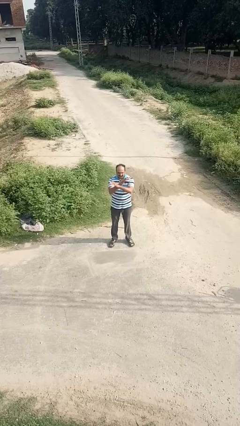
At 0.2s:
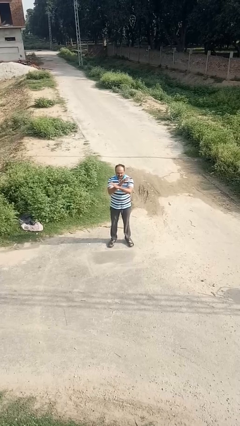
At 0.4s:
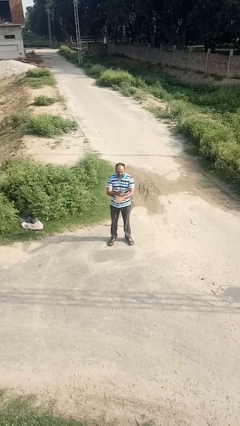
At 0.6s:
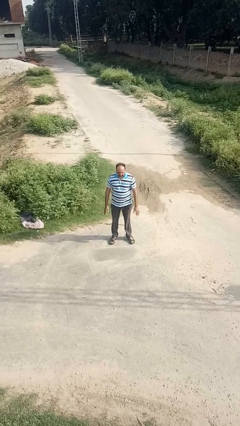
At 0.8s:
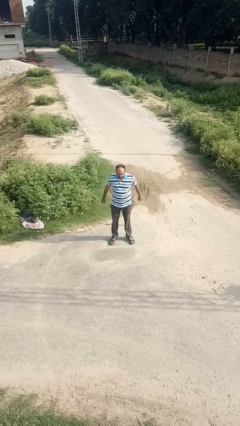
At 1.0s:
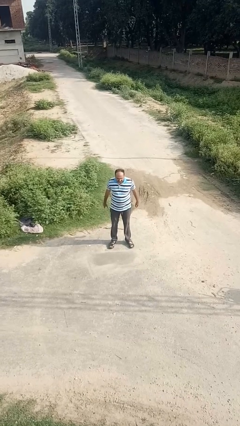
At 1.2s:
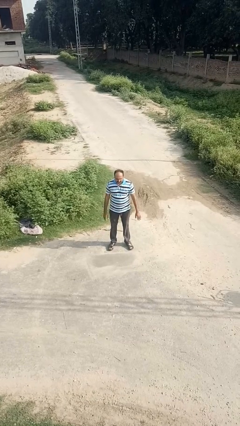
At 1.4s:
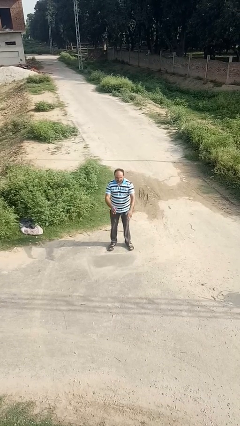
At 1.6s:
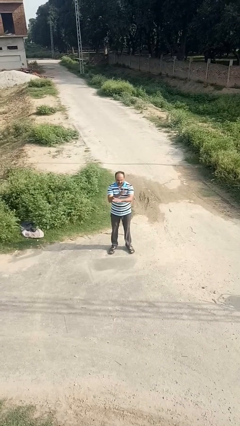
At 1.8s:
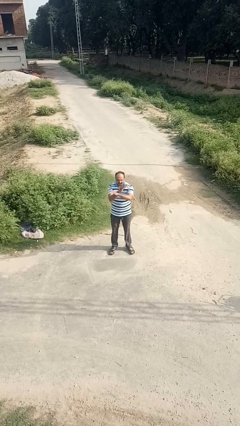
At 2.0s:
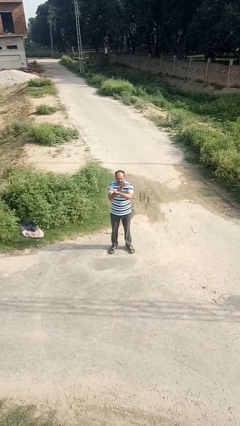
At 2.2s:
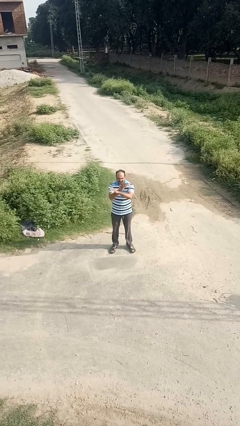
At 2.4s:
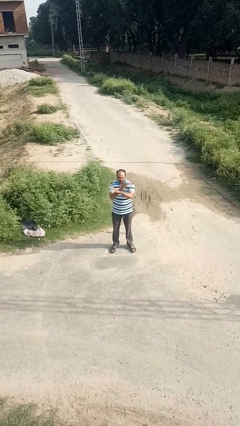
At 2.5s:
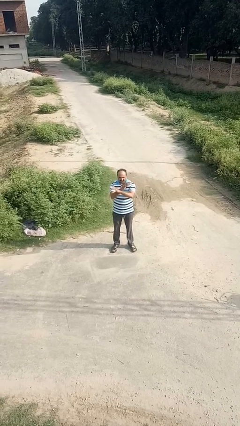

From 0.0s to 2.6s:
person crosses arms

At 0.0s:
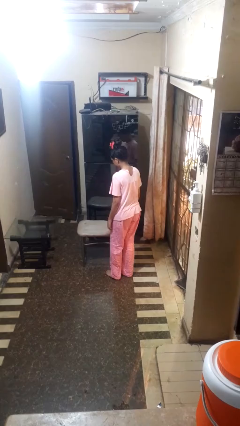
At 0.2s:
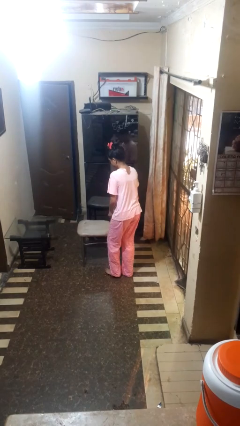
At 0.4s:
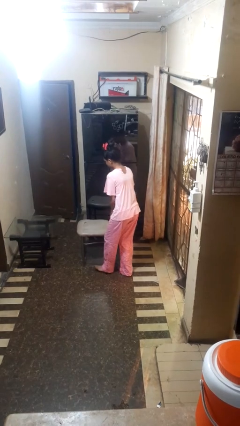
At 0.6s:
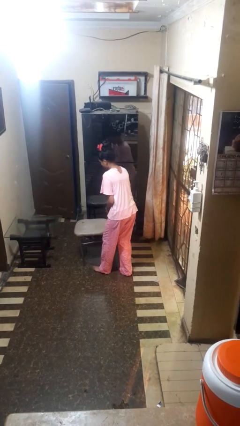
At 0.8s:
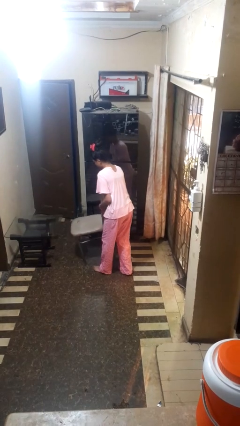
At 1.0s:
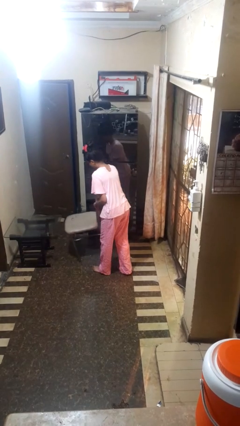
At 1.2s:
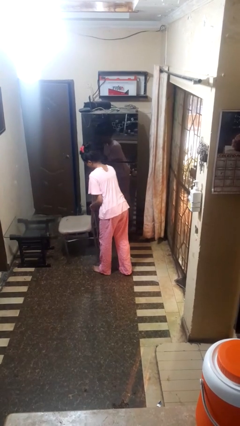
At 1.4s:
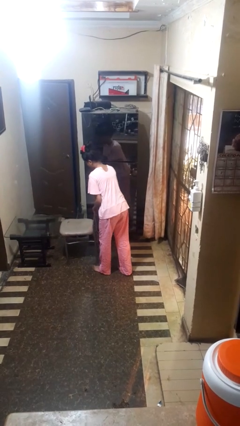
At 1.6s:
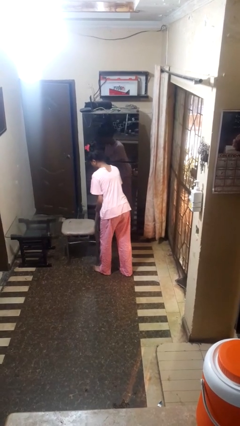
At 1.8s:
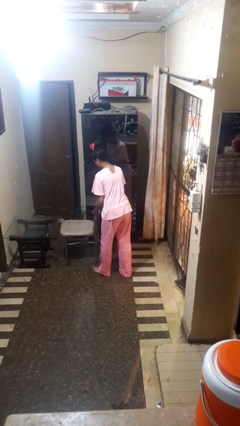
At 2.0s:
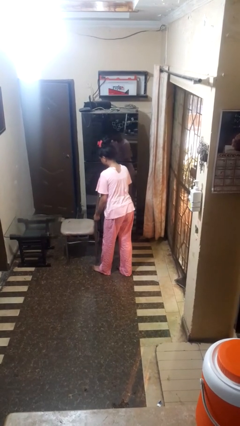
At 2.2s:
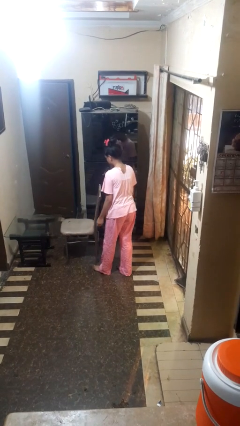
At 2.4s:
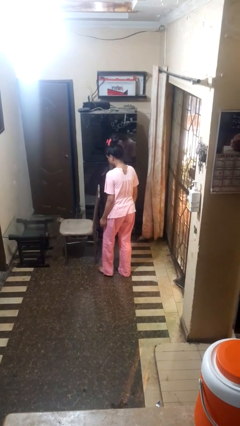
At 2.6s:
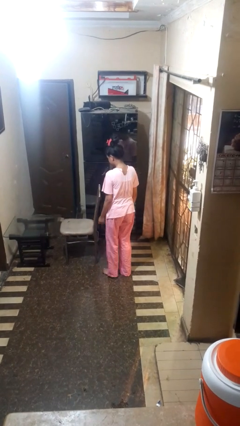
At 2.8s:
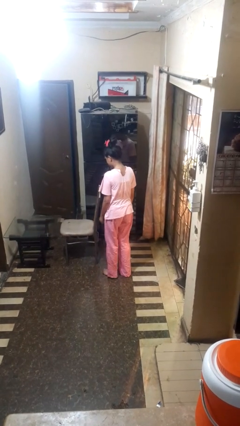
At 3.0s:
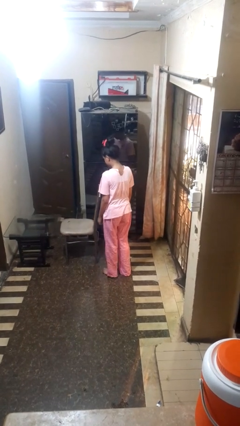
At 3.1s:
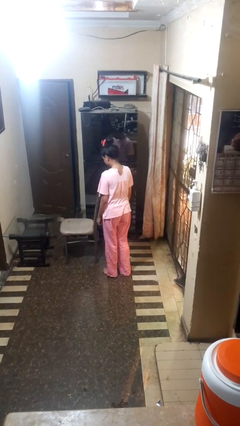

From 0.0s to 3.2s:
person pushes in chair

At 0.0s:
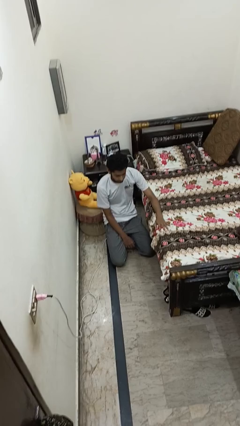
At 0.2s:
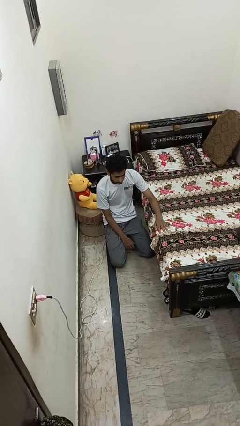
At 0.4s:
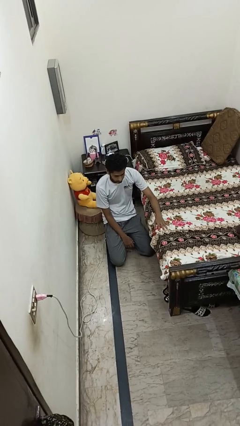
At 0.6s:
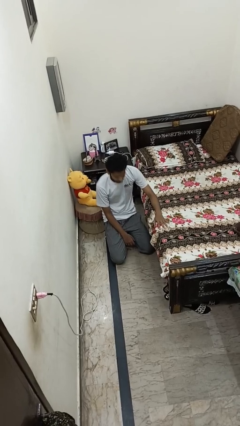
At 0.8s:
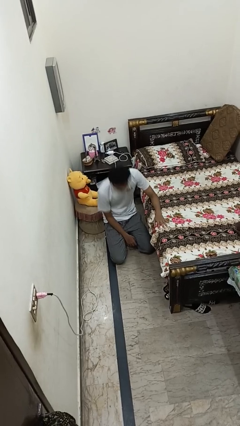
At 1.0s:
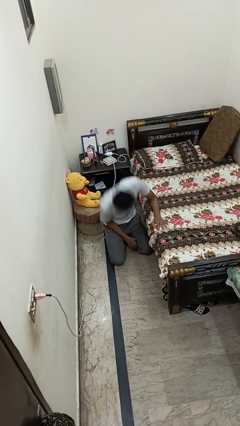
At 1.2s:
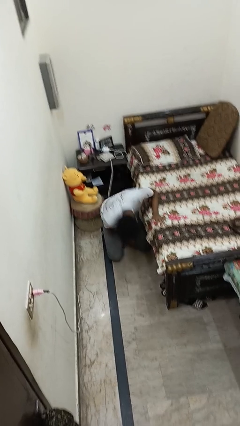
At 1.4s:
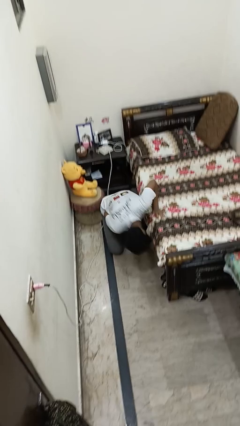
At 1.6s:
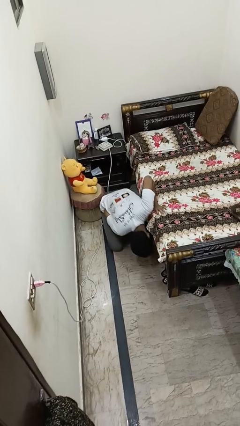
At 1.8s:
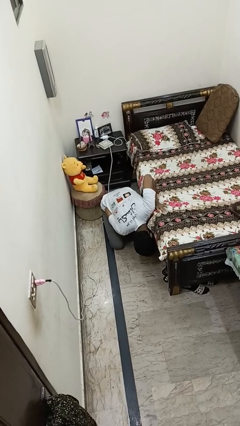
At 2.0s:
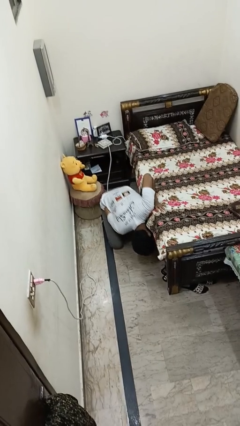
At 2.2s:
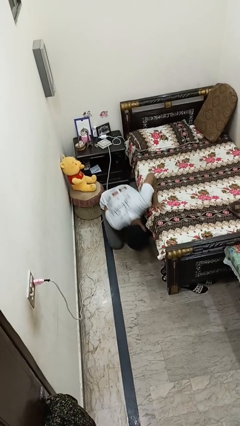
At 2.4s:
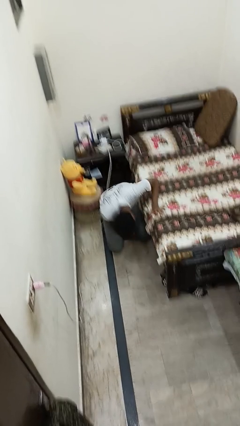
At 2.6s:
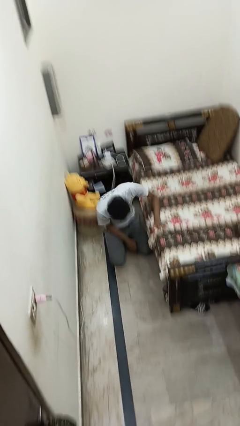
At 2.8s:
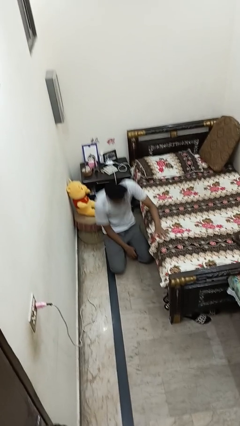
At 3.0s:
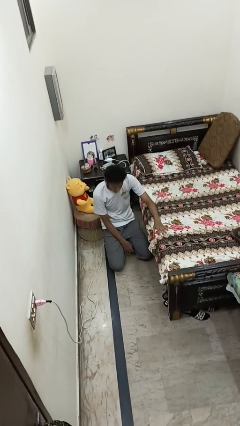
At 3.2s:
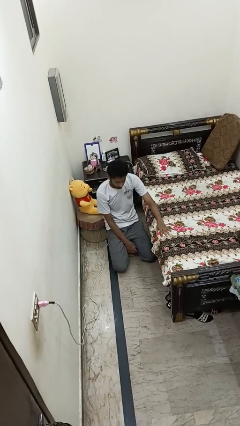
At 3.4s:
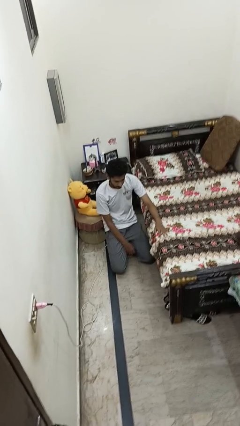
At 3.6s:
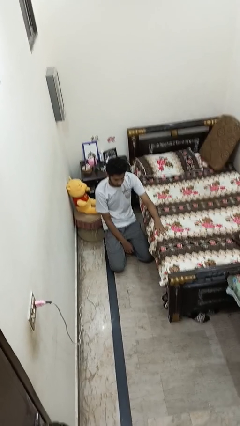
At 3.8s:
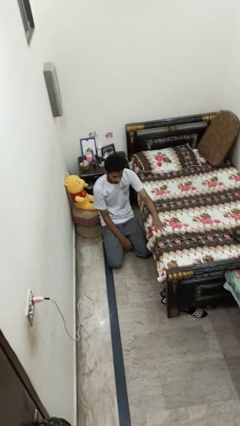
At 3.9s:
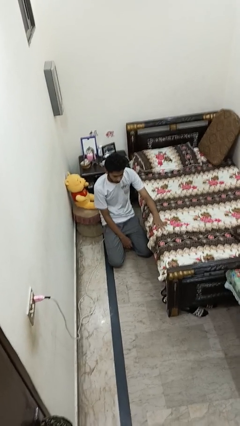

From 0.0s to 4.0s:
person searches under bed

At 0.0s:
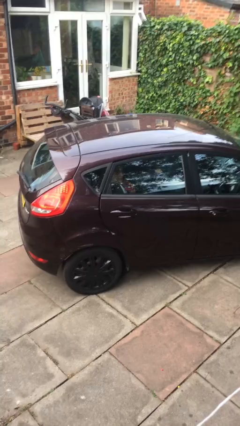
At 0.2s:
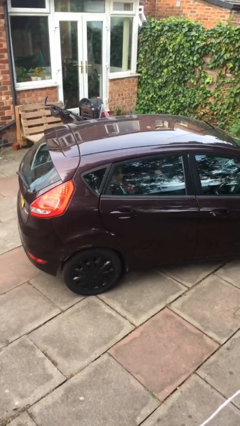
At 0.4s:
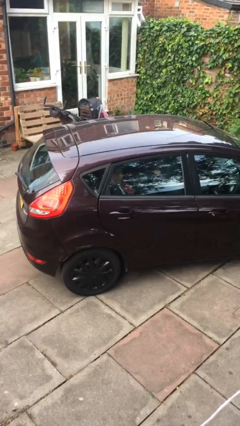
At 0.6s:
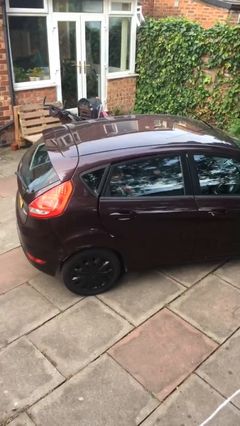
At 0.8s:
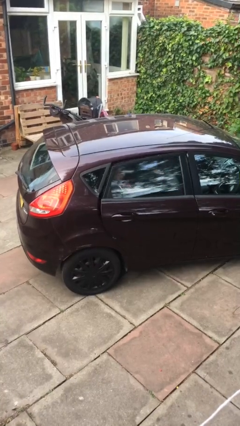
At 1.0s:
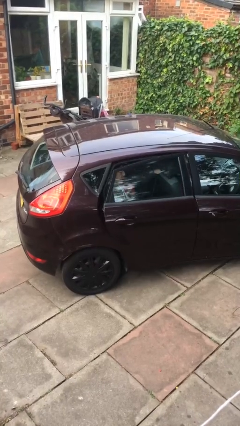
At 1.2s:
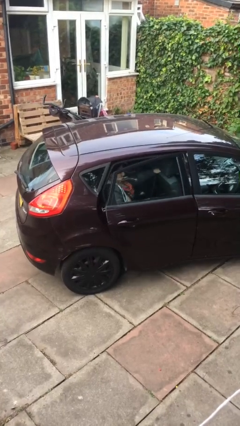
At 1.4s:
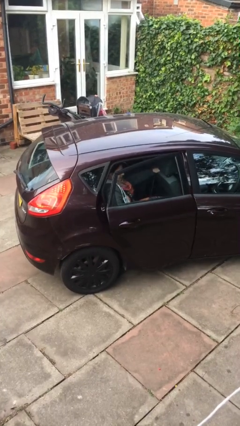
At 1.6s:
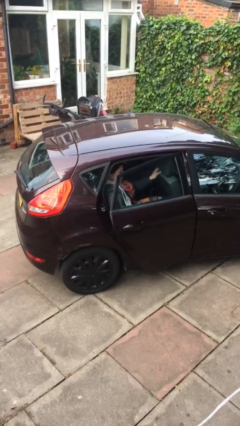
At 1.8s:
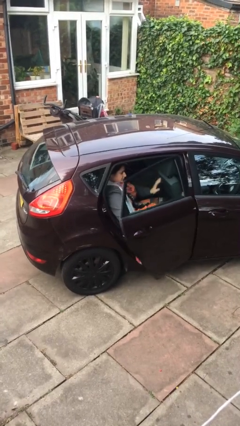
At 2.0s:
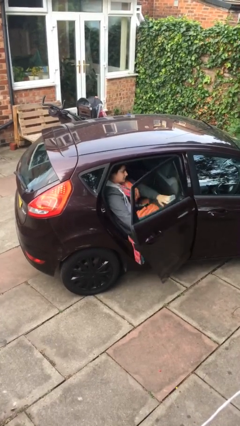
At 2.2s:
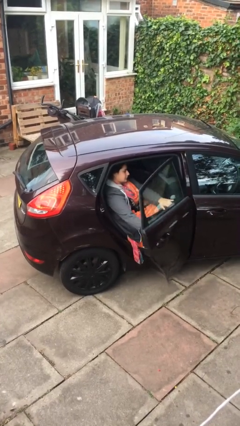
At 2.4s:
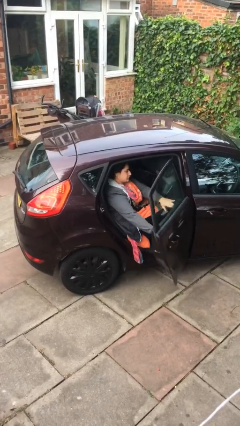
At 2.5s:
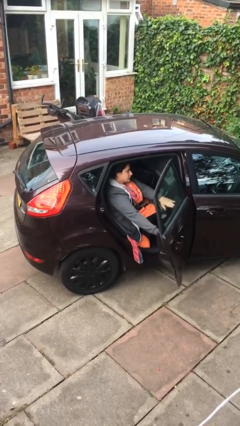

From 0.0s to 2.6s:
person opens car door

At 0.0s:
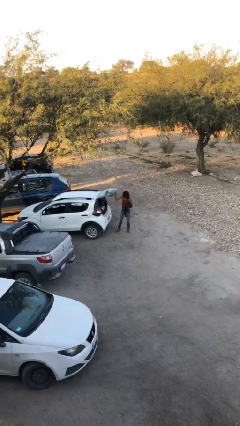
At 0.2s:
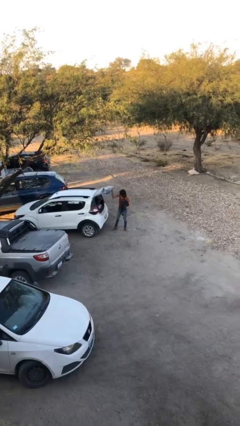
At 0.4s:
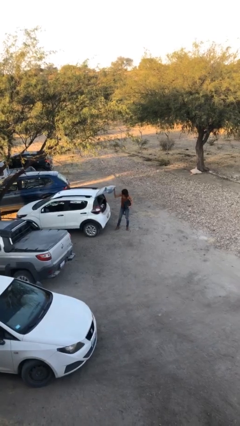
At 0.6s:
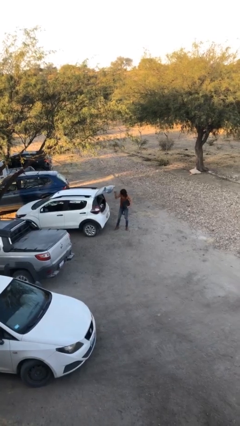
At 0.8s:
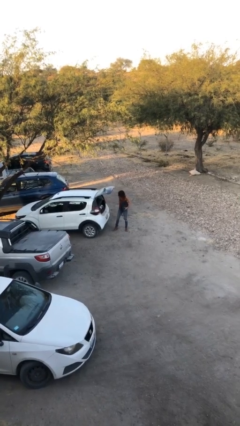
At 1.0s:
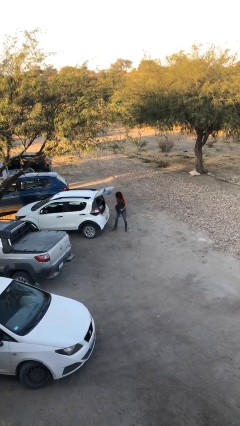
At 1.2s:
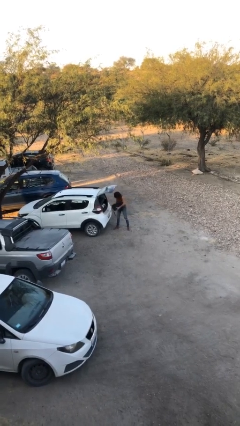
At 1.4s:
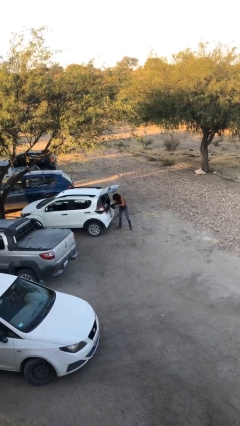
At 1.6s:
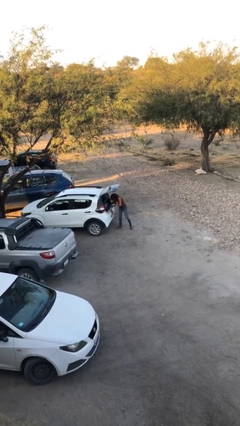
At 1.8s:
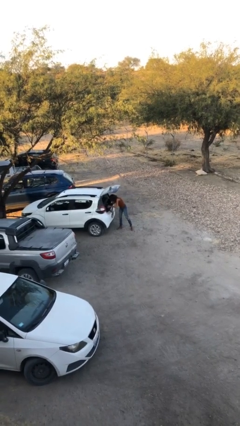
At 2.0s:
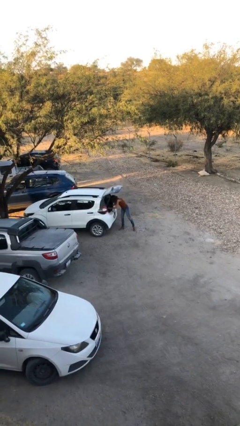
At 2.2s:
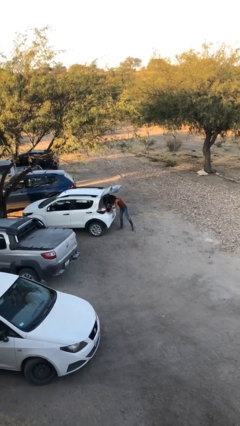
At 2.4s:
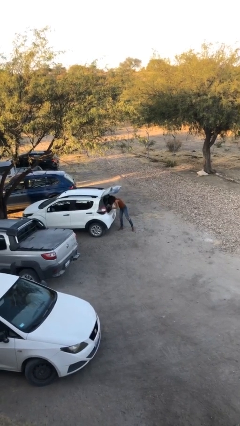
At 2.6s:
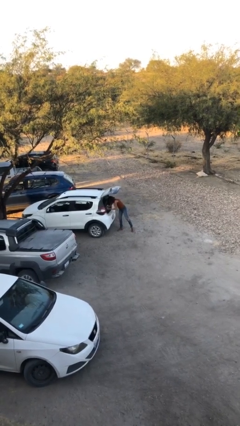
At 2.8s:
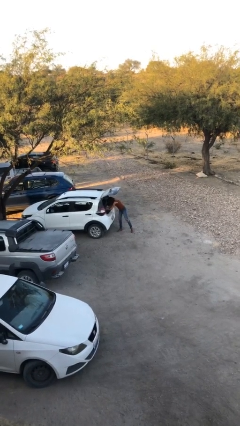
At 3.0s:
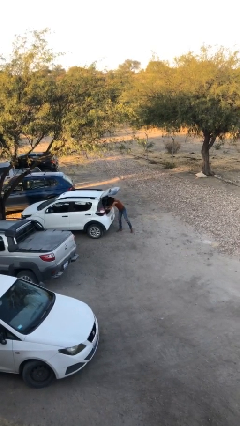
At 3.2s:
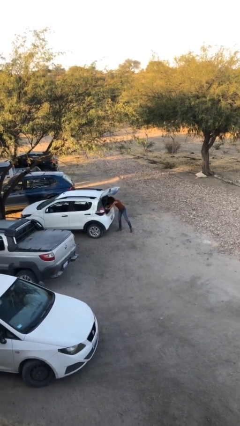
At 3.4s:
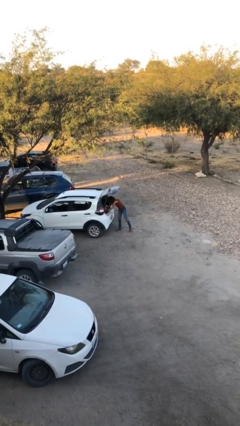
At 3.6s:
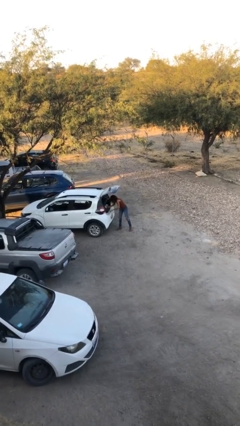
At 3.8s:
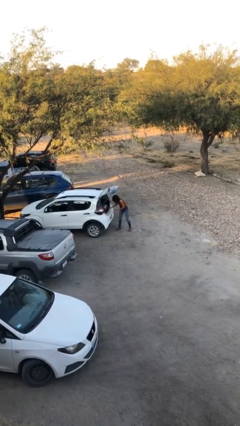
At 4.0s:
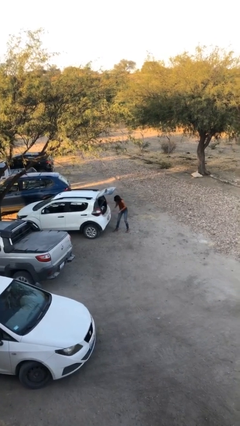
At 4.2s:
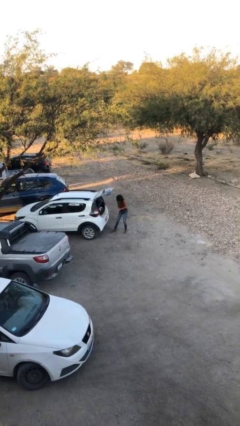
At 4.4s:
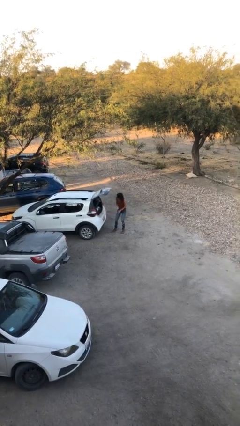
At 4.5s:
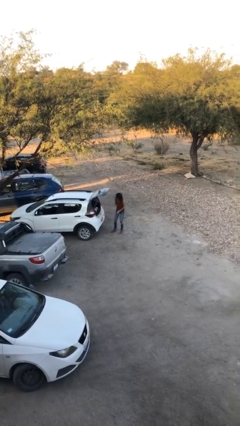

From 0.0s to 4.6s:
person loads car

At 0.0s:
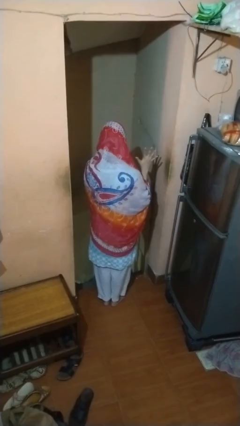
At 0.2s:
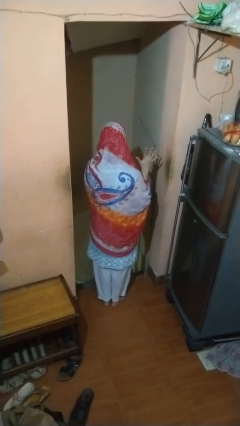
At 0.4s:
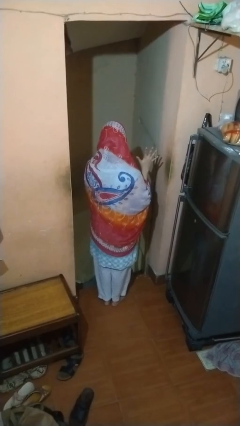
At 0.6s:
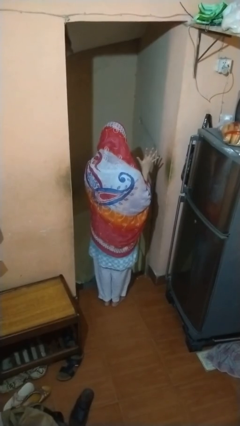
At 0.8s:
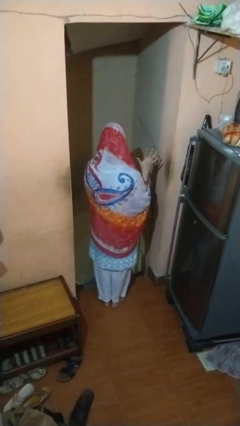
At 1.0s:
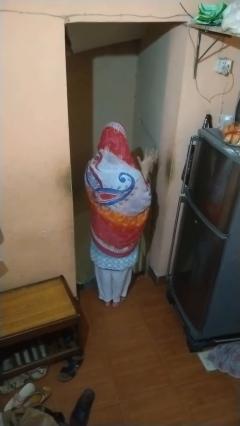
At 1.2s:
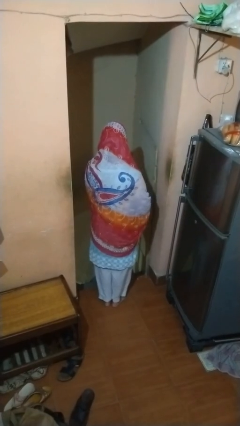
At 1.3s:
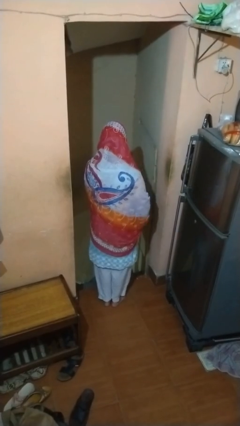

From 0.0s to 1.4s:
person gestures number five
